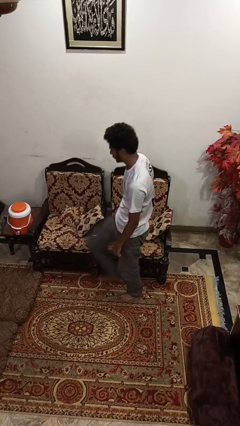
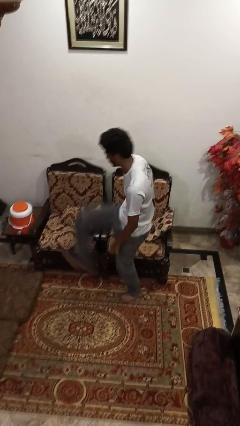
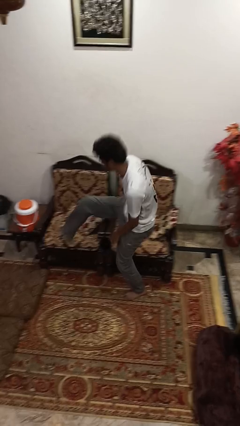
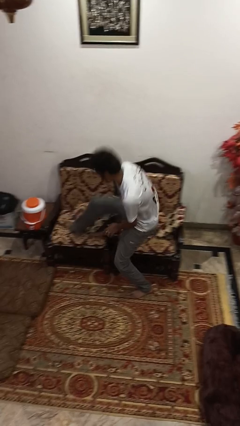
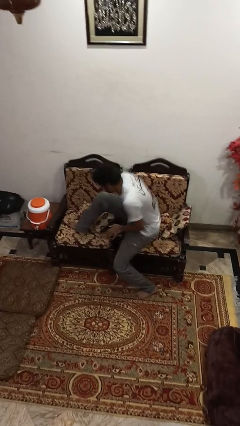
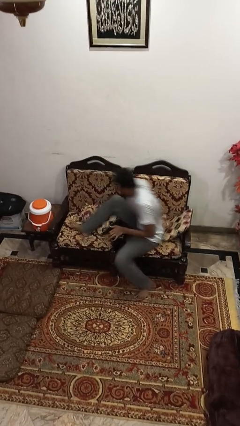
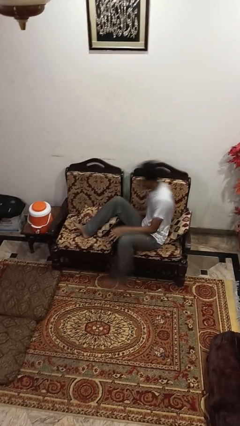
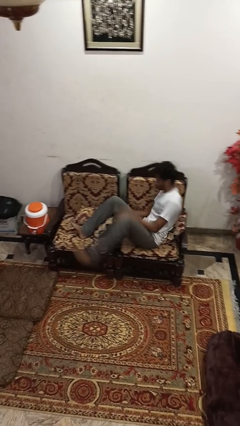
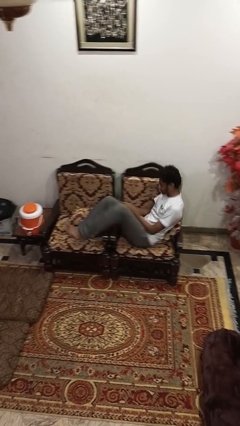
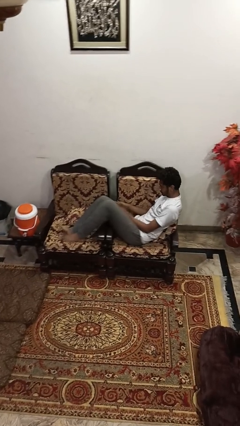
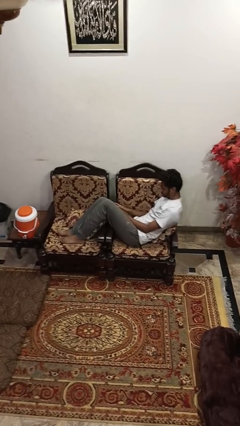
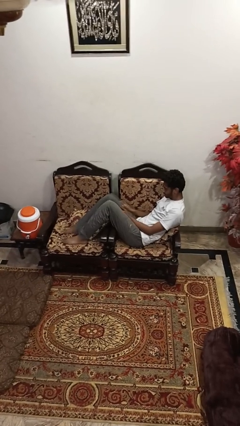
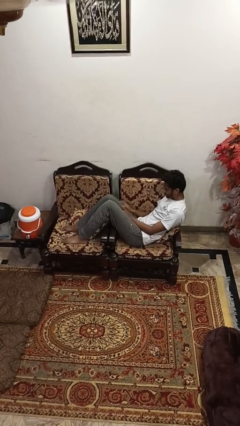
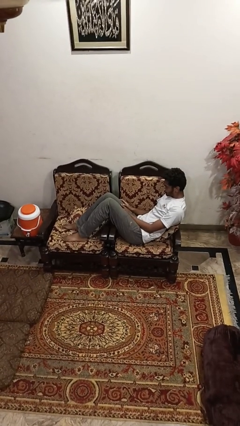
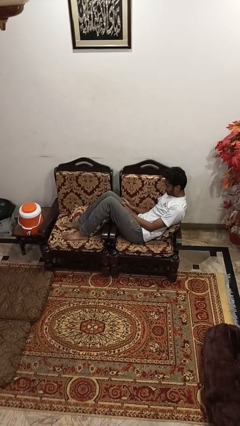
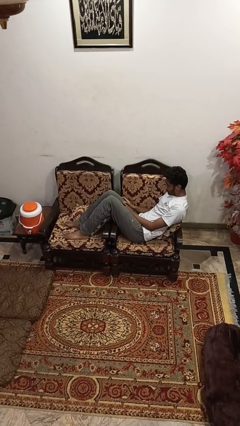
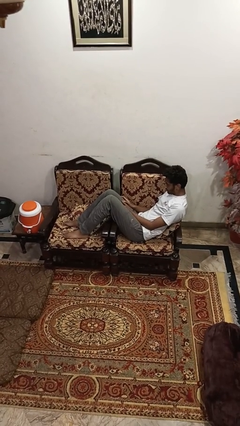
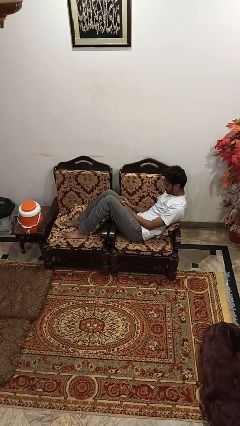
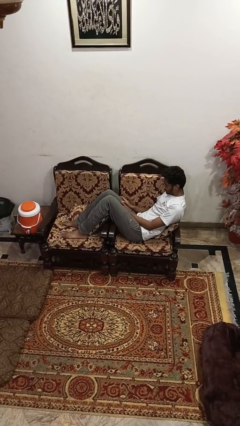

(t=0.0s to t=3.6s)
person lies down on couch

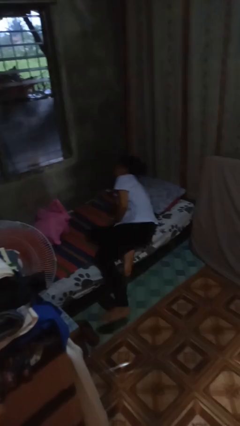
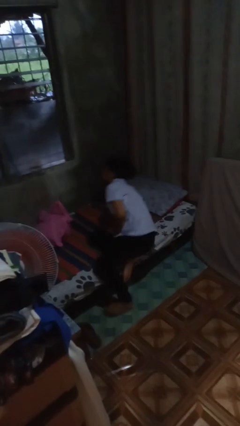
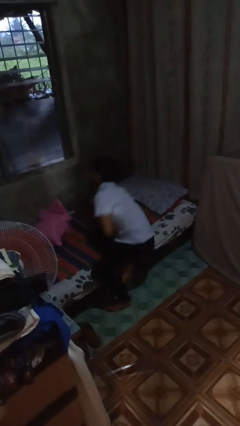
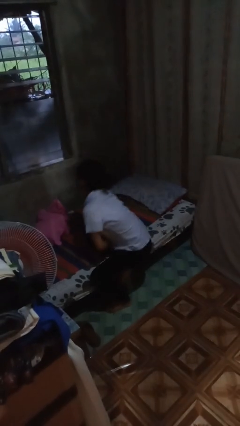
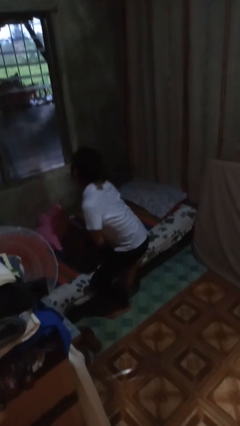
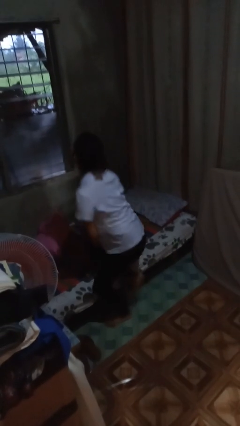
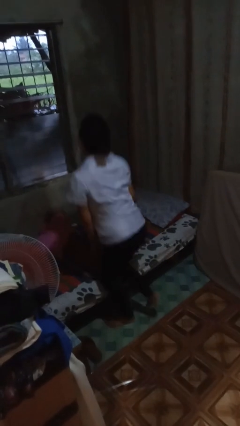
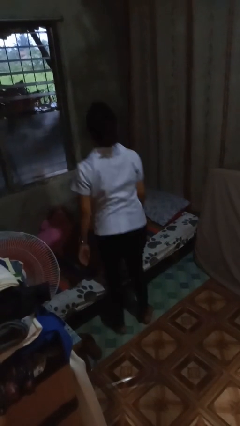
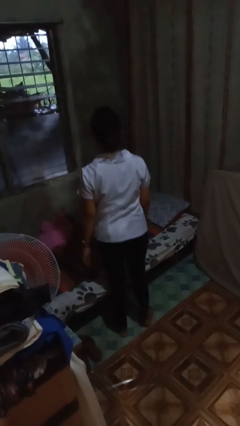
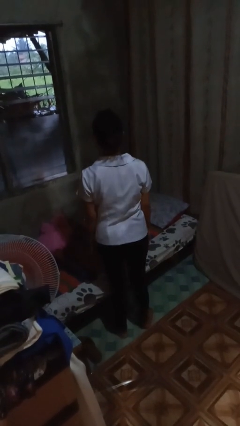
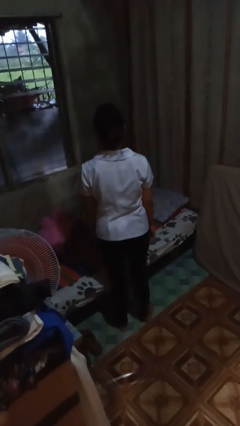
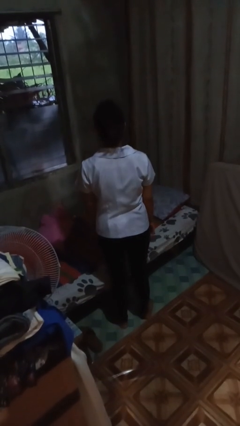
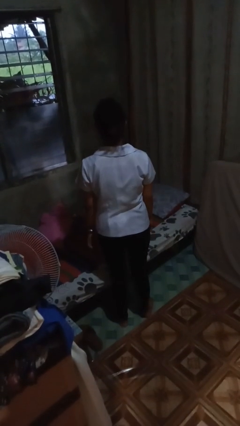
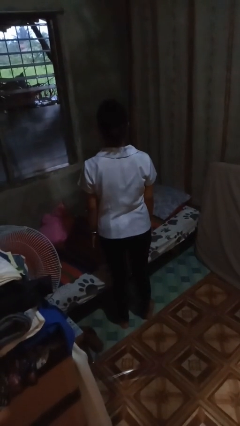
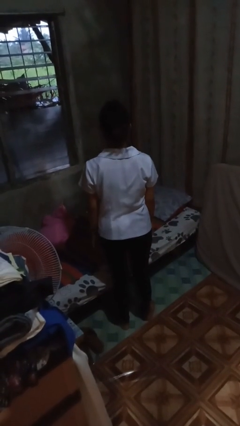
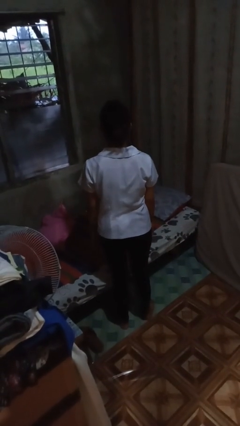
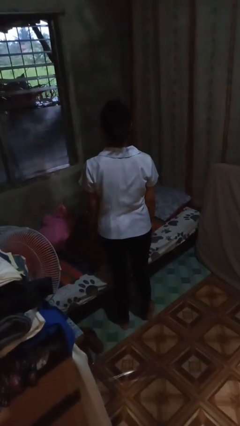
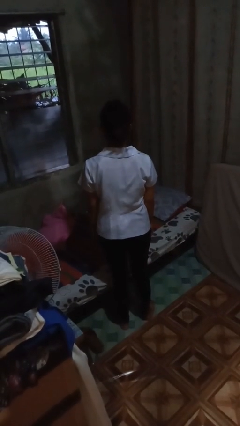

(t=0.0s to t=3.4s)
person stands up

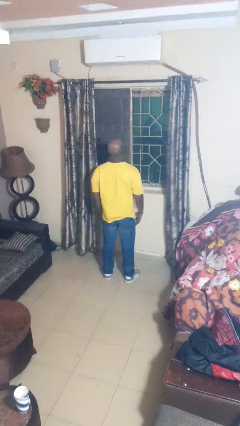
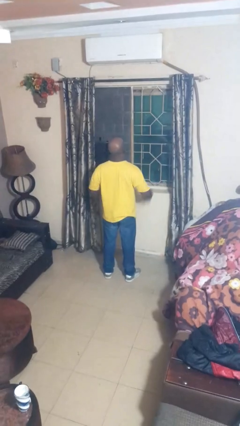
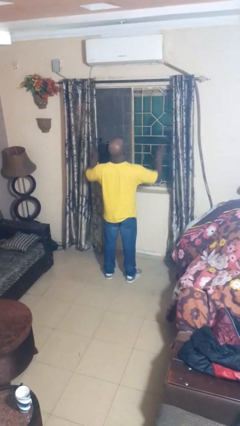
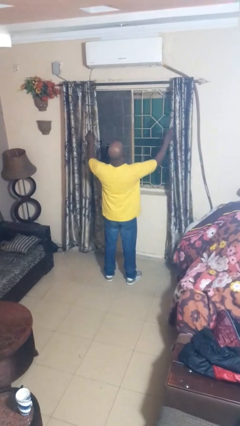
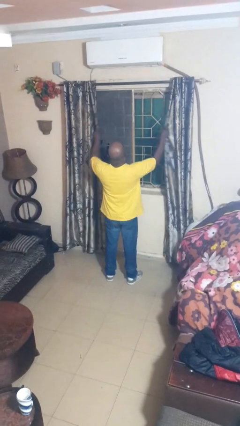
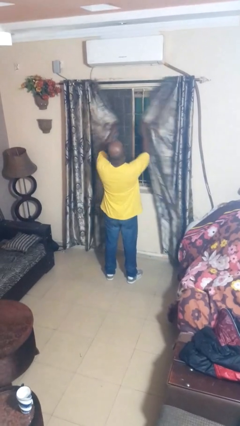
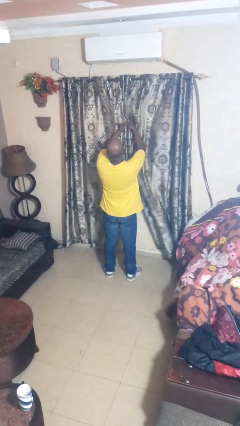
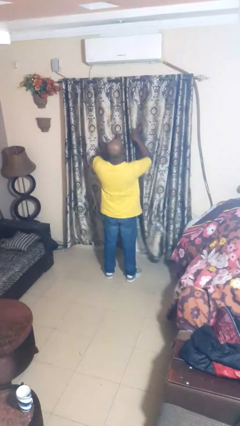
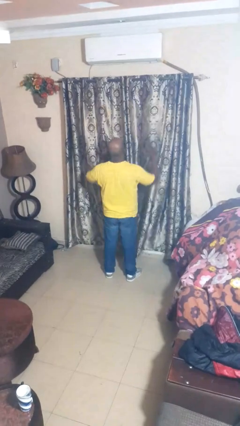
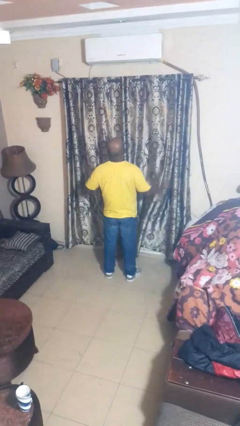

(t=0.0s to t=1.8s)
person closes curtains

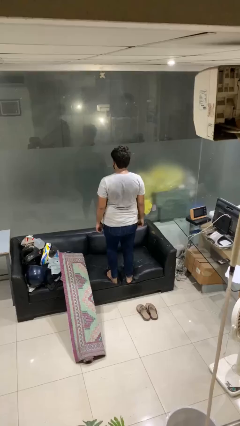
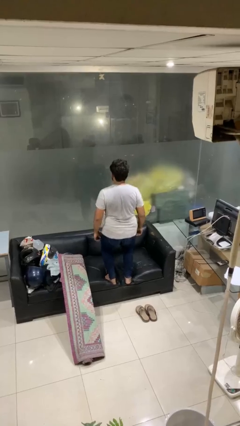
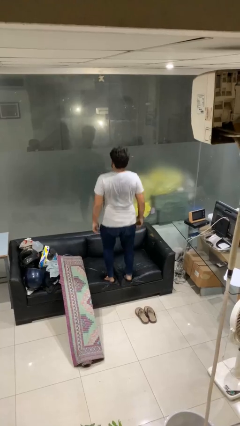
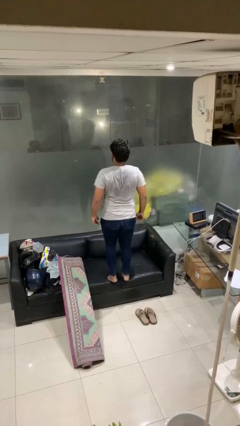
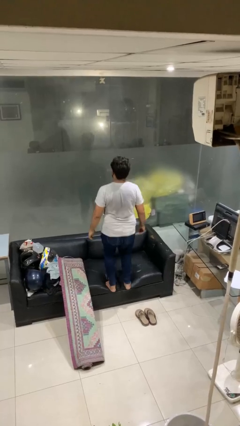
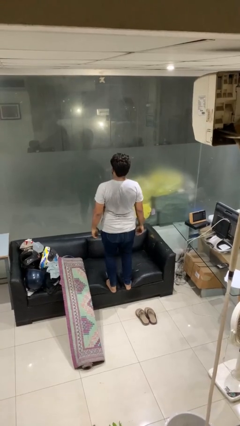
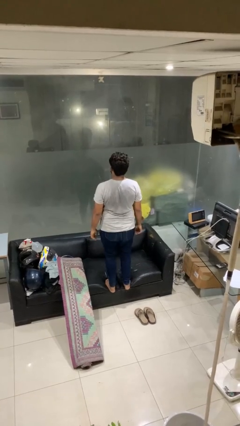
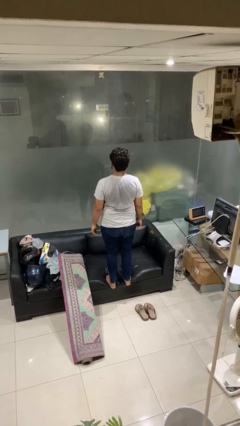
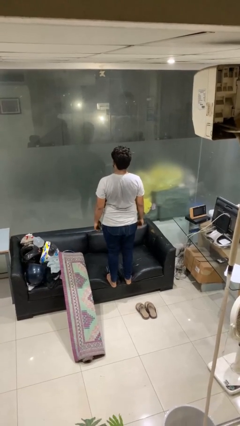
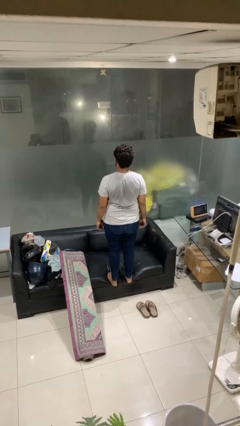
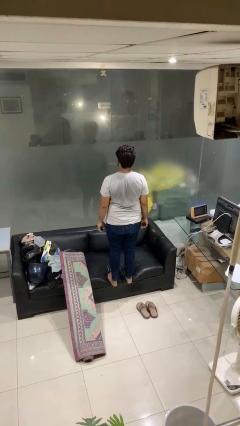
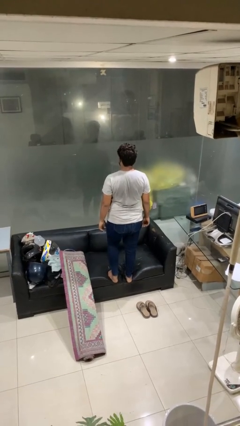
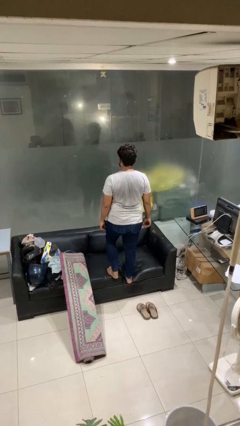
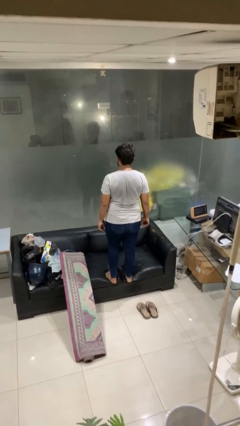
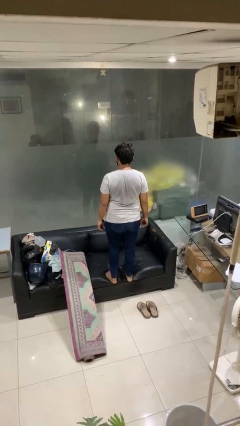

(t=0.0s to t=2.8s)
person jumps on couch

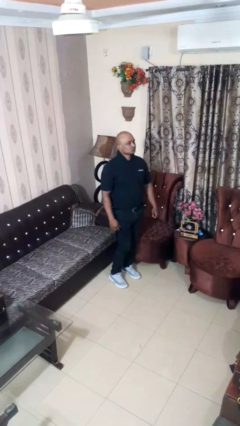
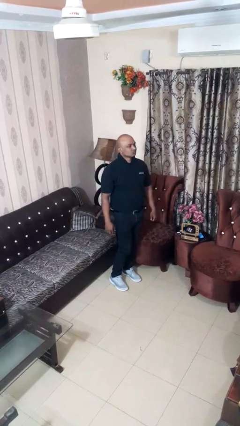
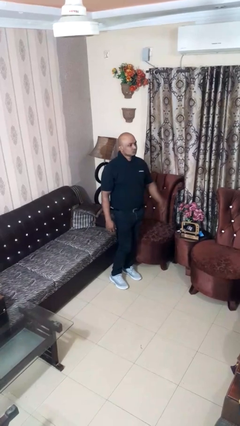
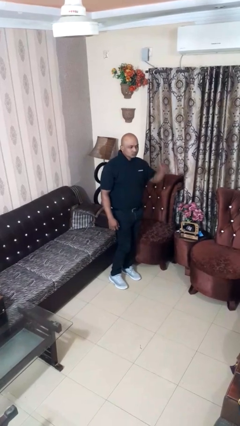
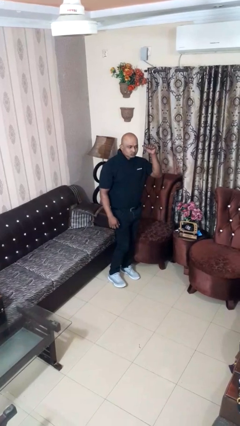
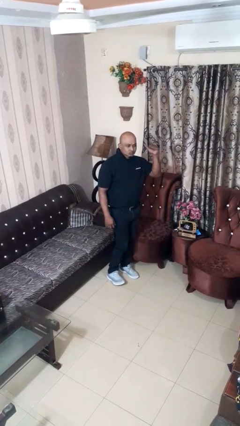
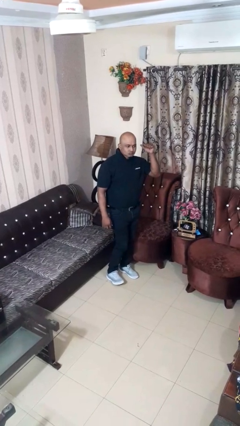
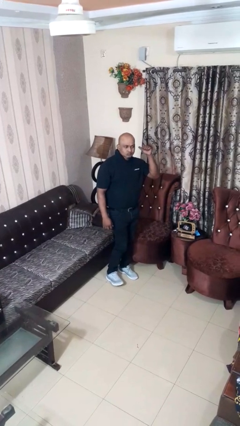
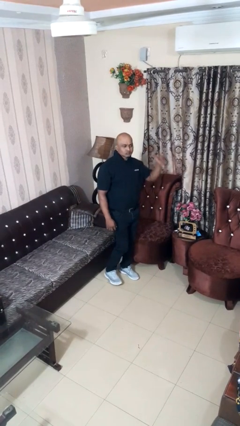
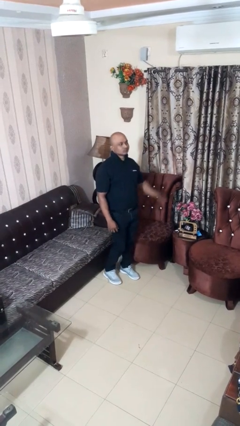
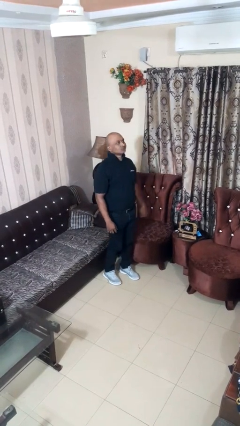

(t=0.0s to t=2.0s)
person gestures behind me

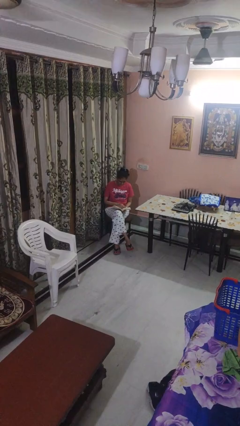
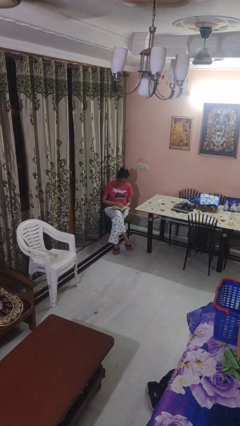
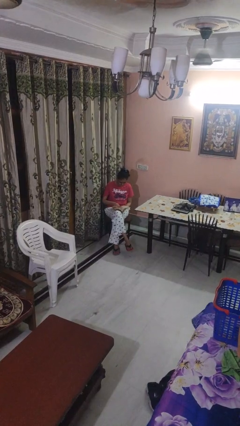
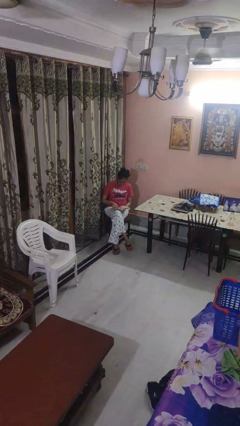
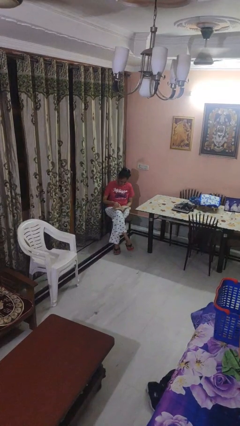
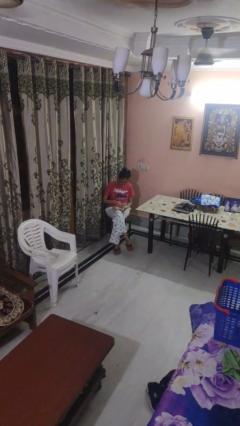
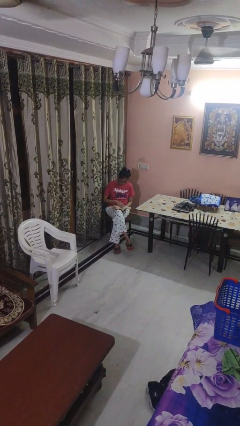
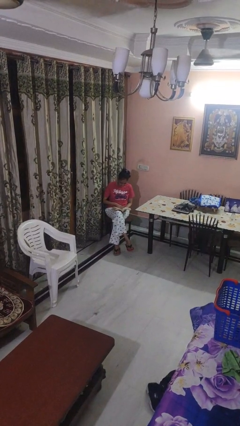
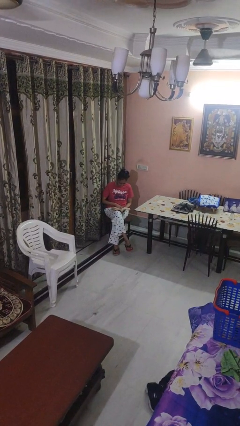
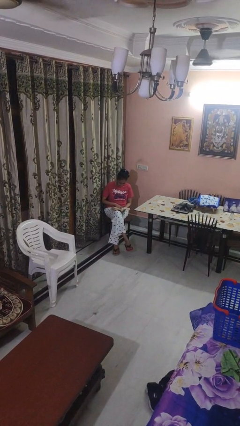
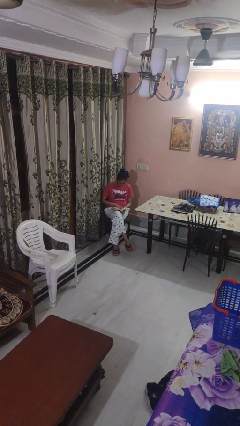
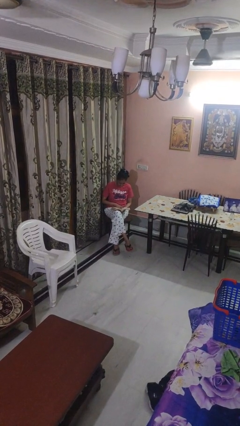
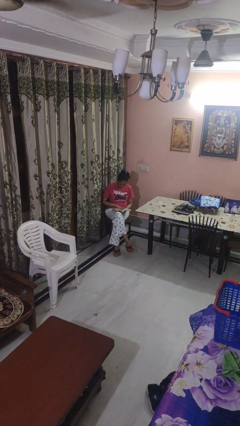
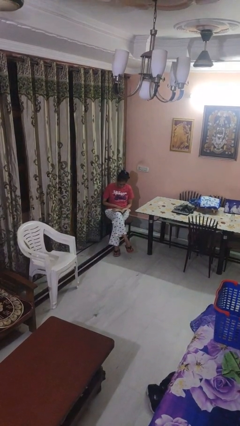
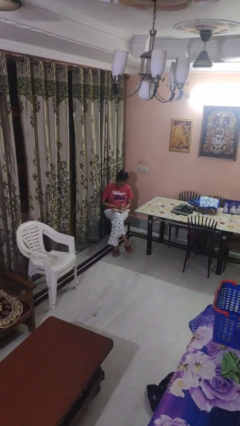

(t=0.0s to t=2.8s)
person reads book

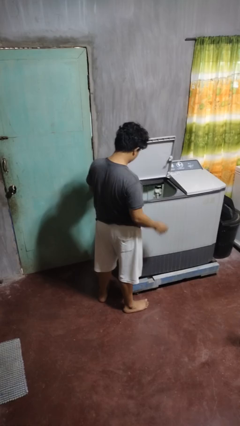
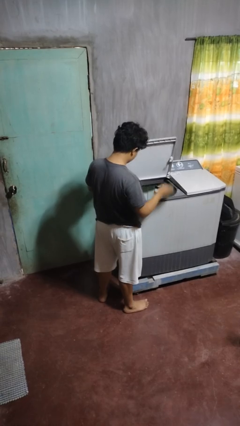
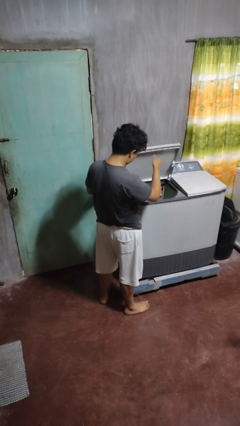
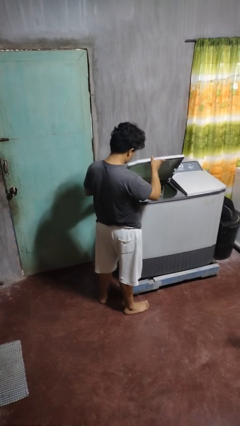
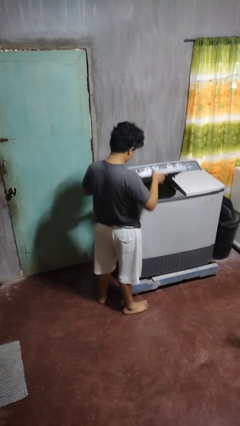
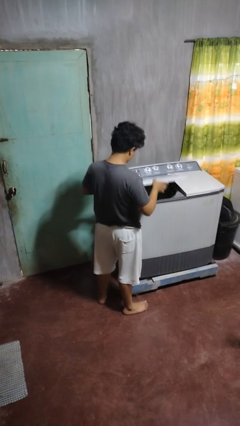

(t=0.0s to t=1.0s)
person closes clothes washer
